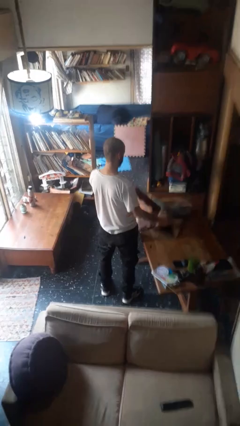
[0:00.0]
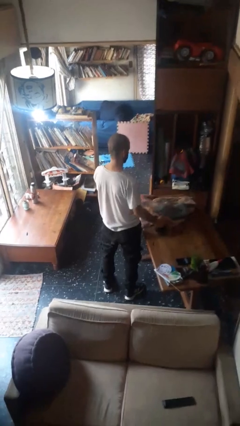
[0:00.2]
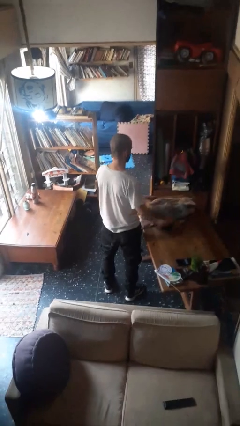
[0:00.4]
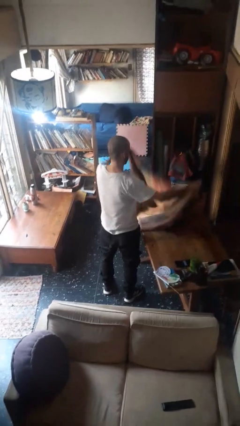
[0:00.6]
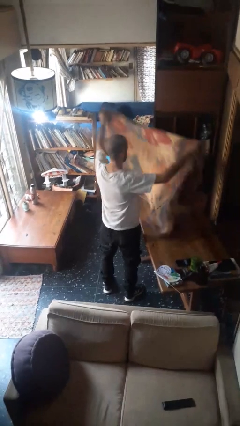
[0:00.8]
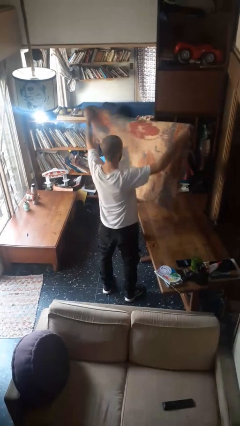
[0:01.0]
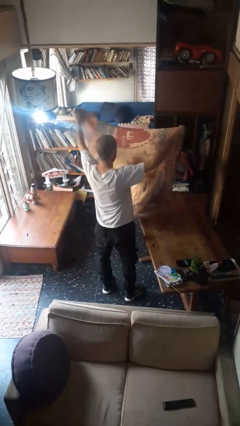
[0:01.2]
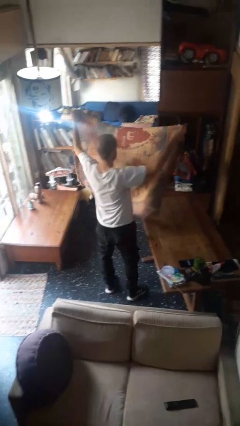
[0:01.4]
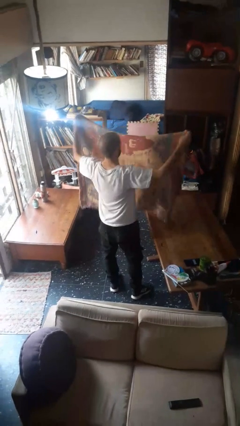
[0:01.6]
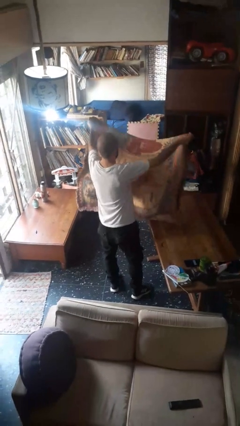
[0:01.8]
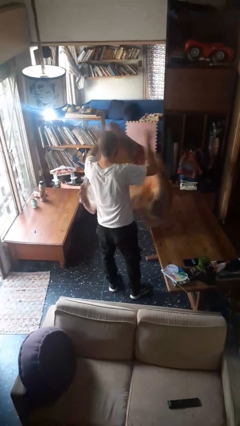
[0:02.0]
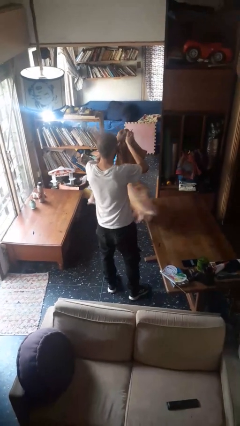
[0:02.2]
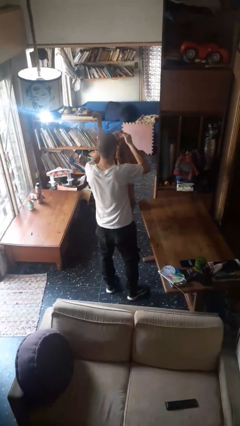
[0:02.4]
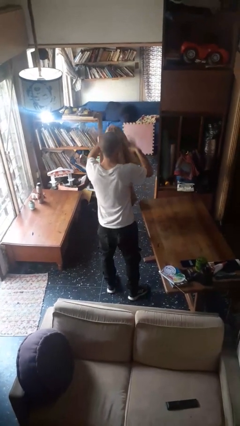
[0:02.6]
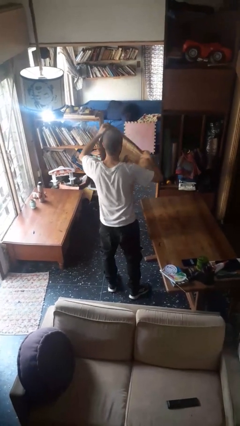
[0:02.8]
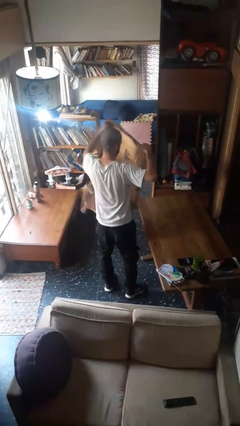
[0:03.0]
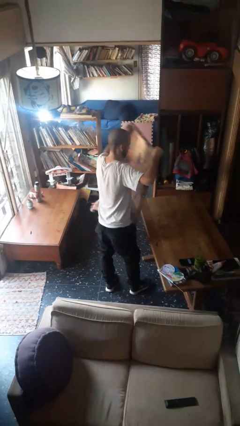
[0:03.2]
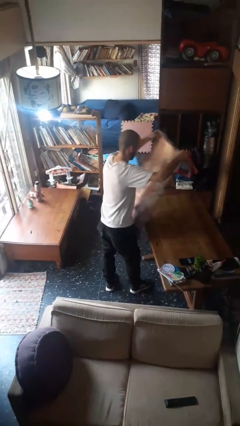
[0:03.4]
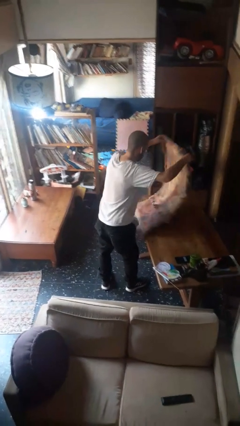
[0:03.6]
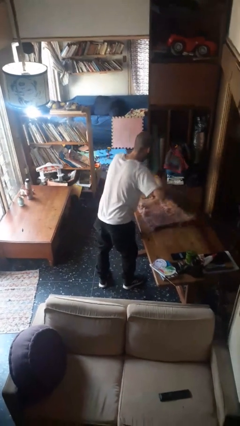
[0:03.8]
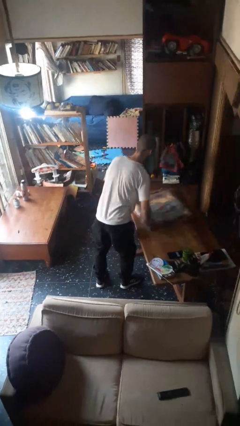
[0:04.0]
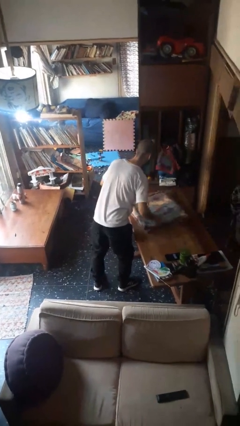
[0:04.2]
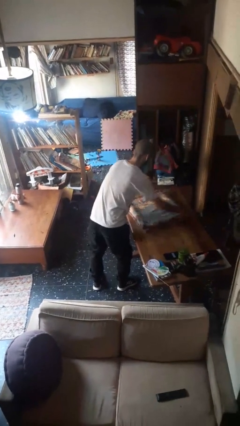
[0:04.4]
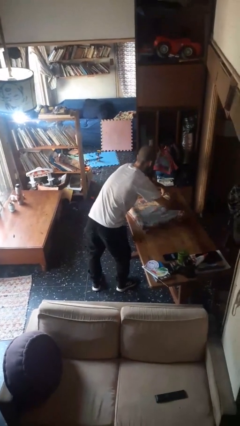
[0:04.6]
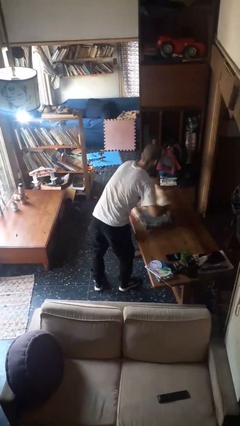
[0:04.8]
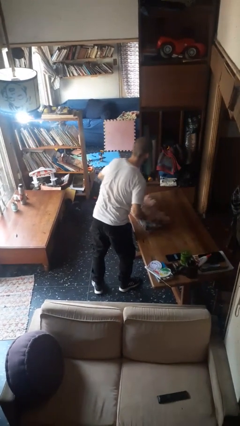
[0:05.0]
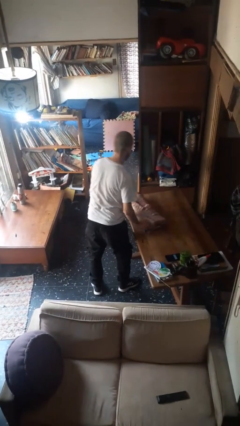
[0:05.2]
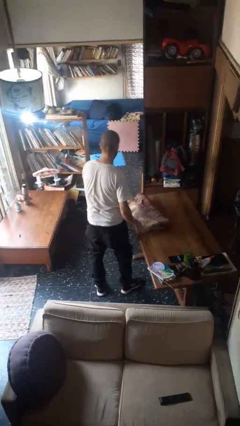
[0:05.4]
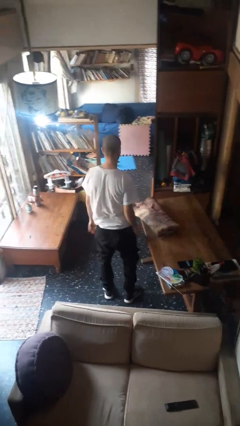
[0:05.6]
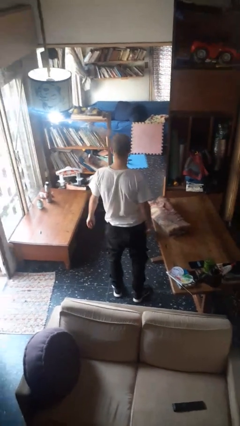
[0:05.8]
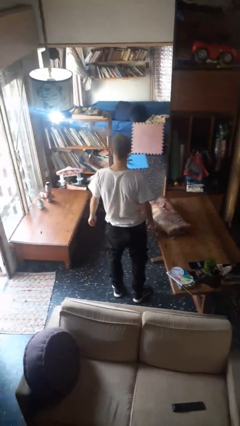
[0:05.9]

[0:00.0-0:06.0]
person folds blanket

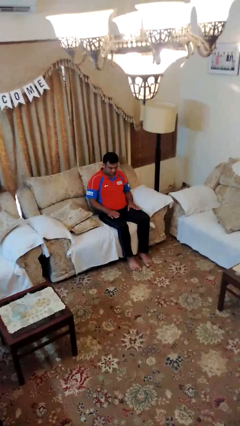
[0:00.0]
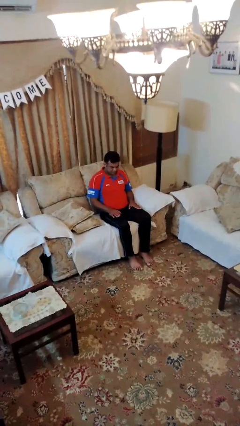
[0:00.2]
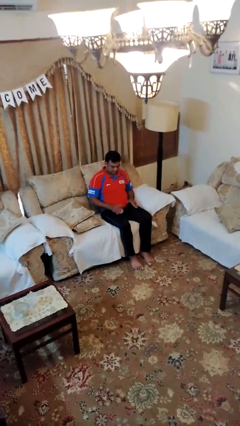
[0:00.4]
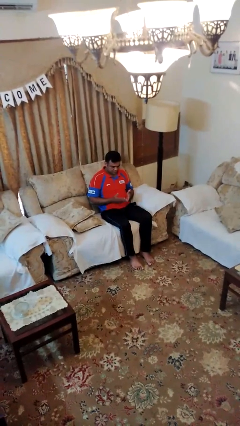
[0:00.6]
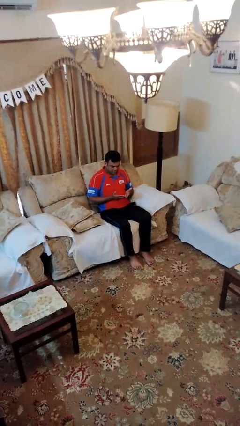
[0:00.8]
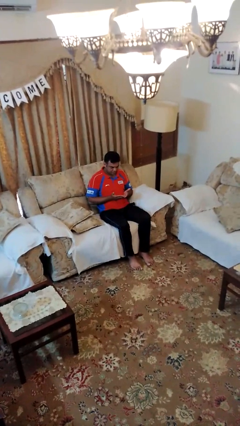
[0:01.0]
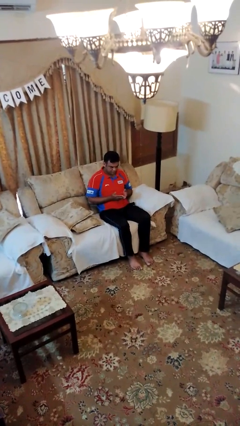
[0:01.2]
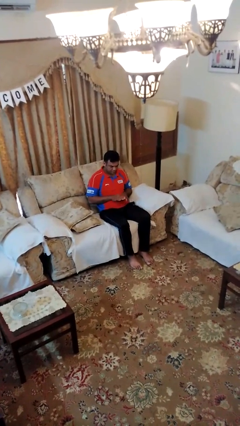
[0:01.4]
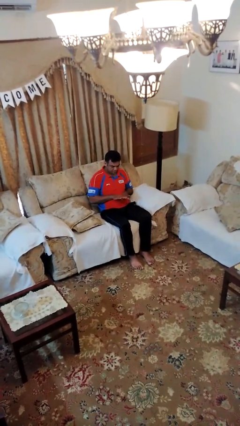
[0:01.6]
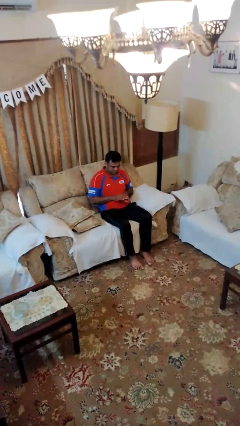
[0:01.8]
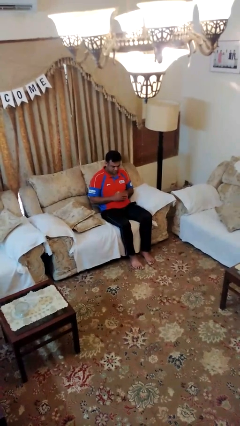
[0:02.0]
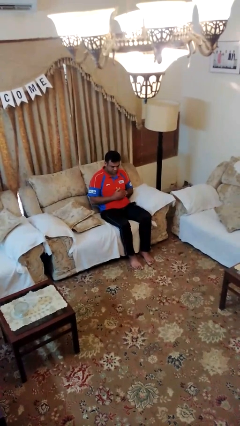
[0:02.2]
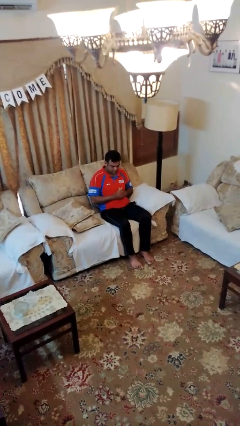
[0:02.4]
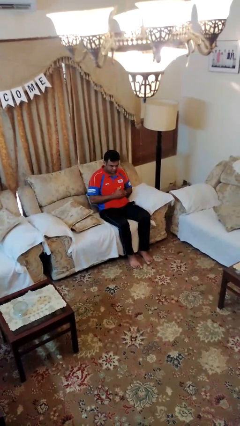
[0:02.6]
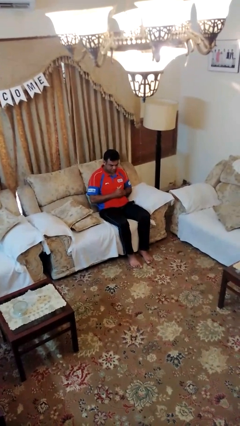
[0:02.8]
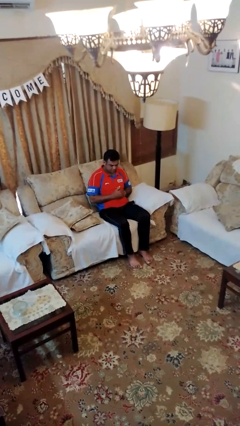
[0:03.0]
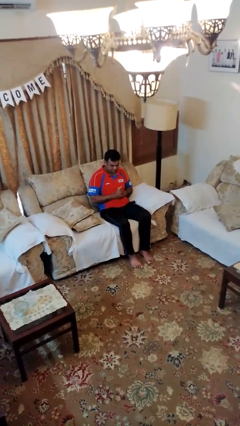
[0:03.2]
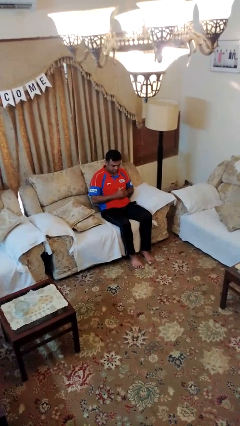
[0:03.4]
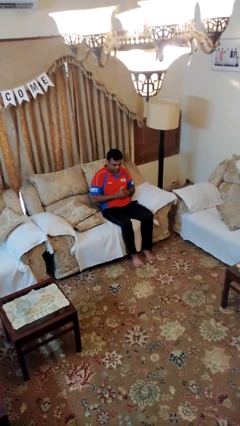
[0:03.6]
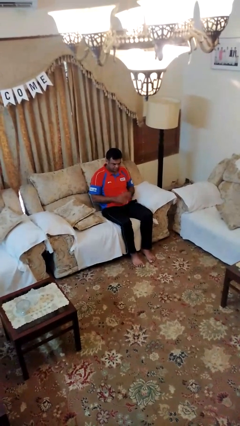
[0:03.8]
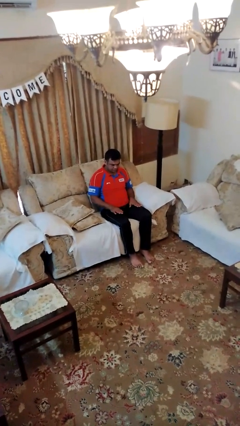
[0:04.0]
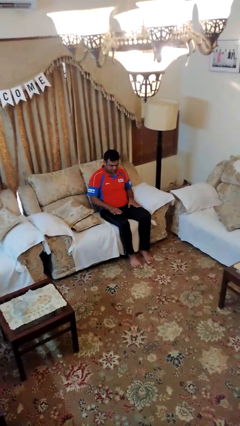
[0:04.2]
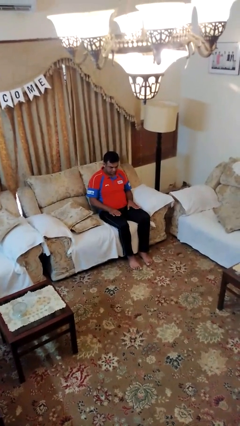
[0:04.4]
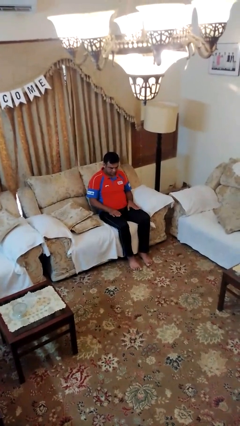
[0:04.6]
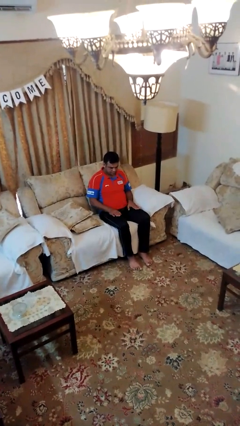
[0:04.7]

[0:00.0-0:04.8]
person looks at hands in lap

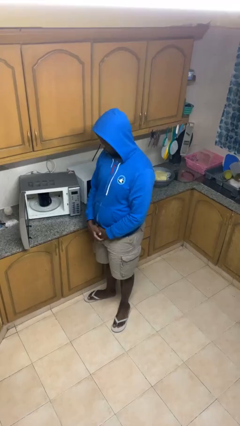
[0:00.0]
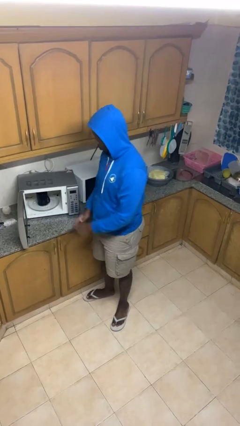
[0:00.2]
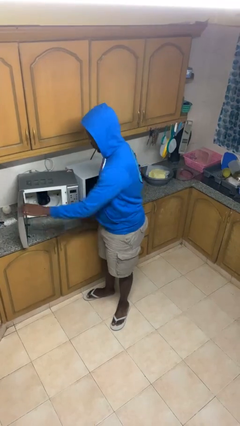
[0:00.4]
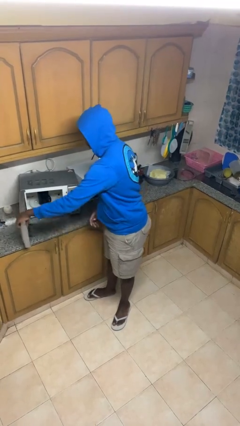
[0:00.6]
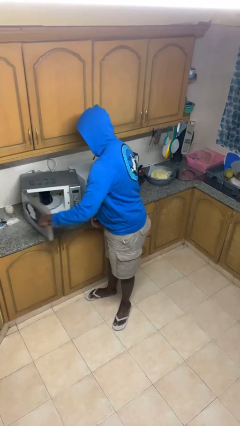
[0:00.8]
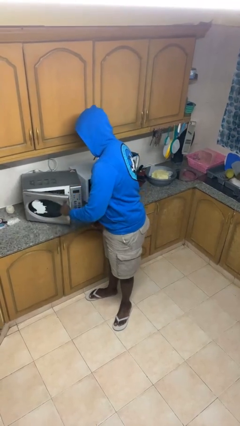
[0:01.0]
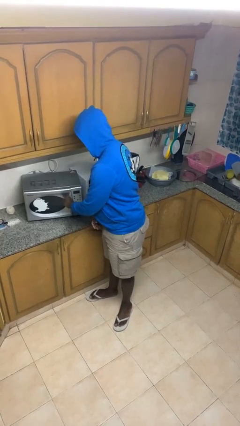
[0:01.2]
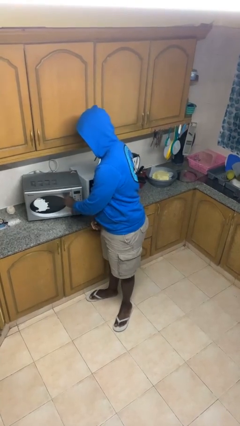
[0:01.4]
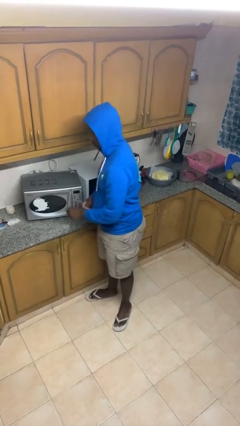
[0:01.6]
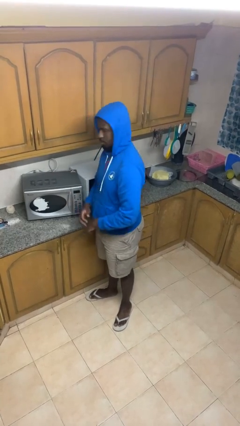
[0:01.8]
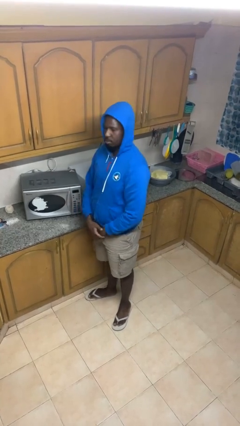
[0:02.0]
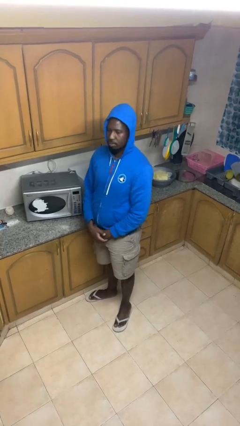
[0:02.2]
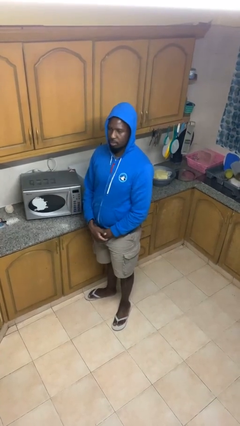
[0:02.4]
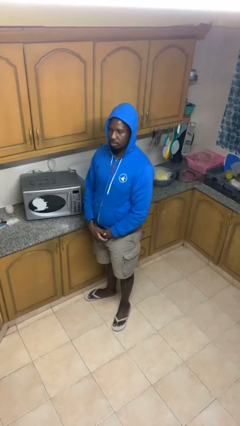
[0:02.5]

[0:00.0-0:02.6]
person closes microwave

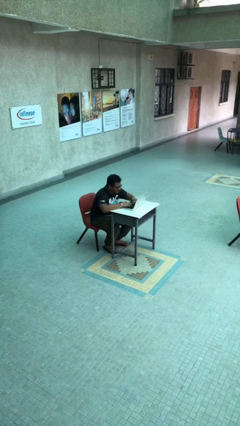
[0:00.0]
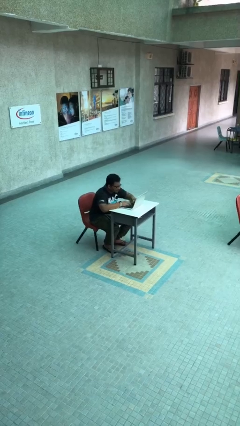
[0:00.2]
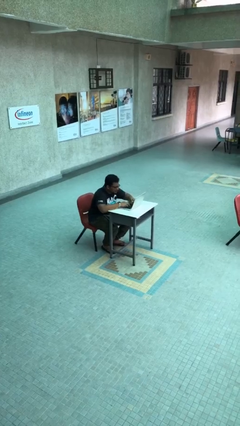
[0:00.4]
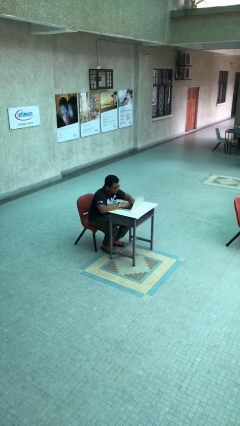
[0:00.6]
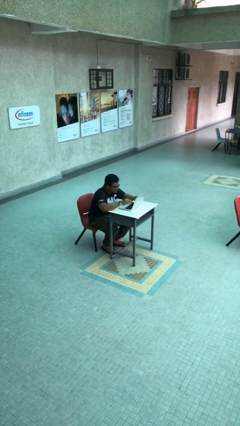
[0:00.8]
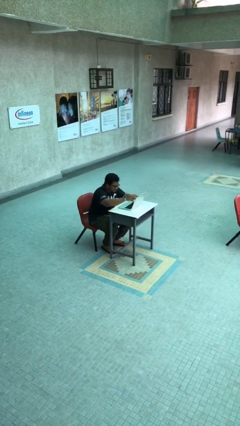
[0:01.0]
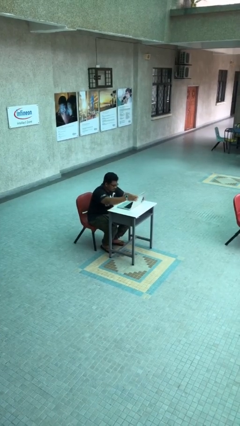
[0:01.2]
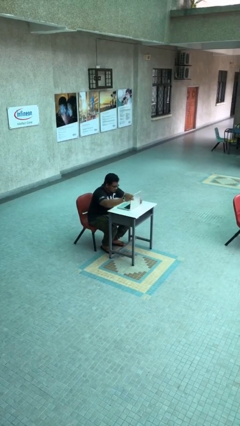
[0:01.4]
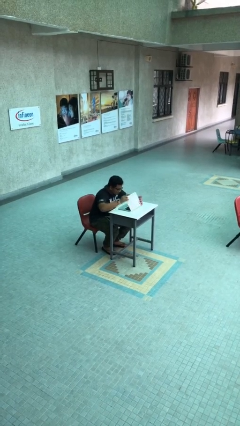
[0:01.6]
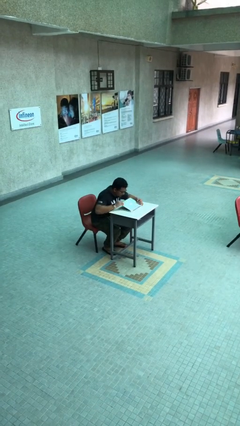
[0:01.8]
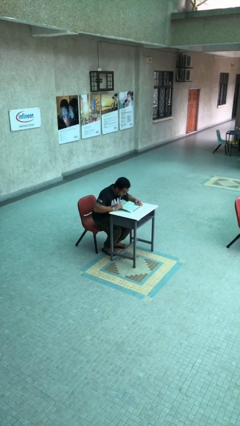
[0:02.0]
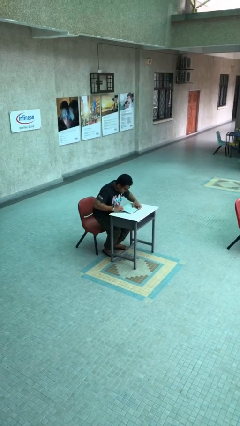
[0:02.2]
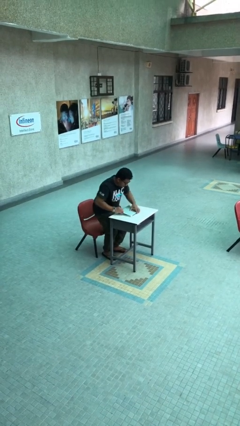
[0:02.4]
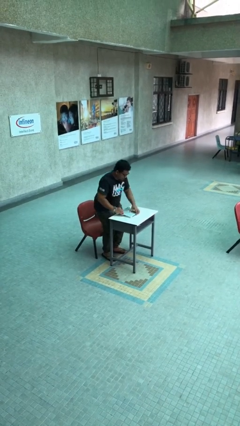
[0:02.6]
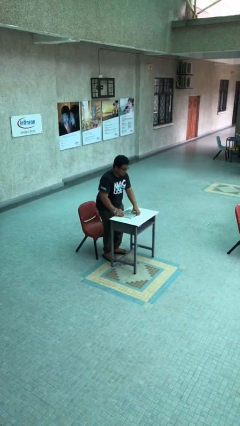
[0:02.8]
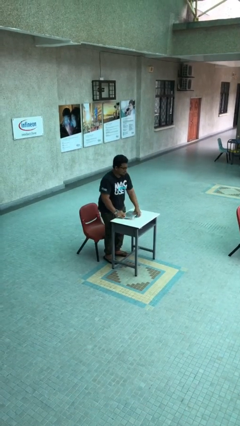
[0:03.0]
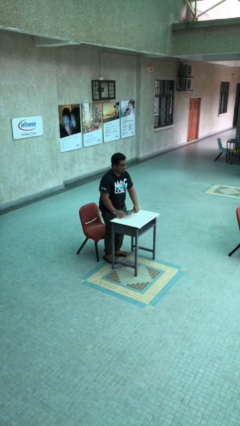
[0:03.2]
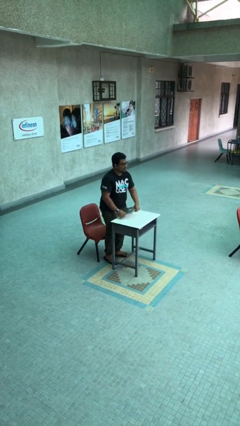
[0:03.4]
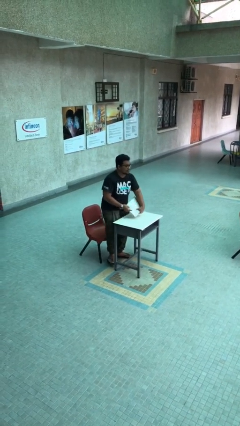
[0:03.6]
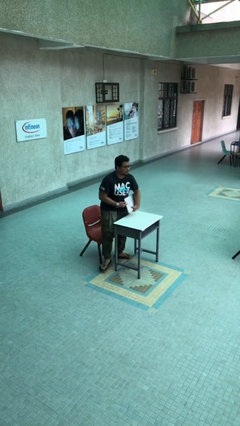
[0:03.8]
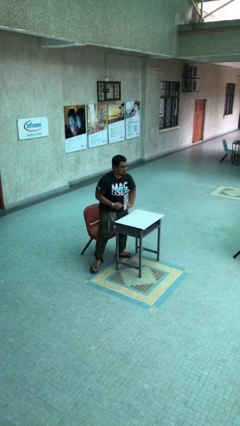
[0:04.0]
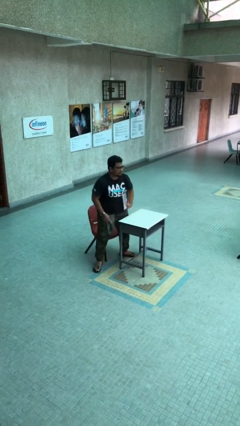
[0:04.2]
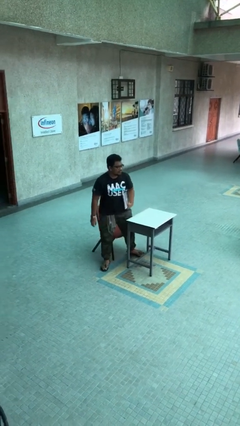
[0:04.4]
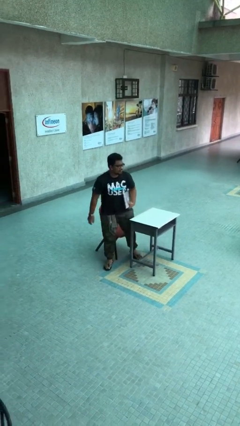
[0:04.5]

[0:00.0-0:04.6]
person stands up
